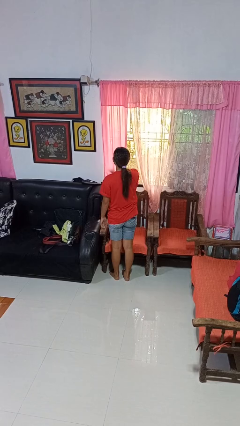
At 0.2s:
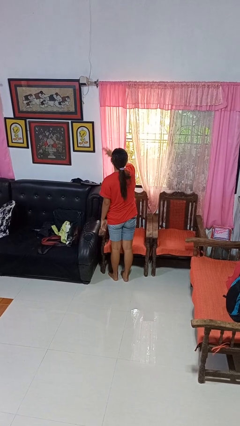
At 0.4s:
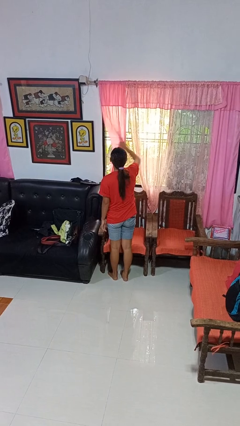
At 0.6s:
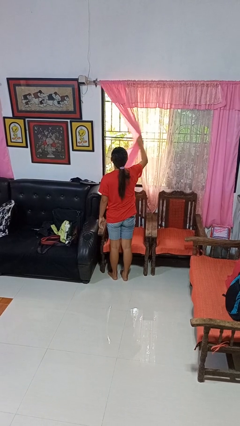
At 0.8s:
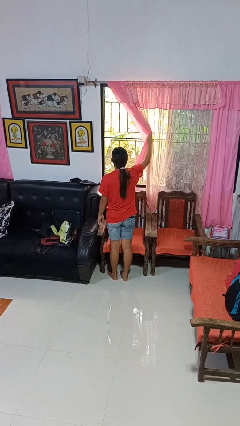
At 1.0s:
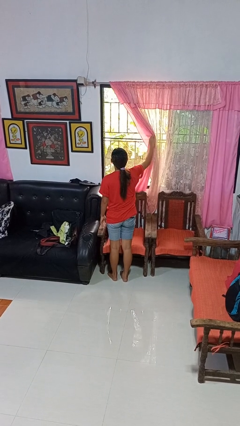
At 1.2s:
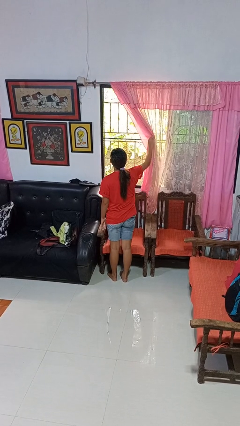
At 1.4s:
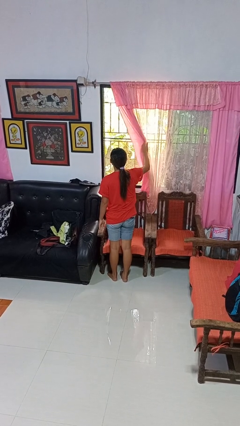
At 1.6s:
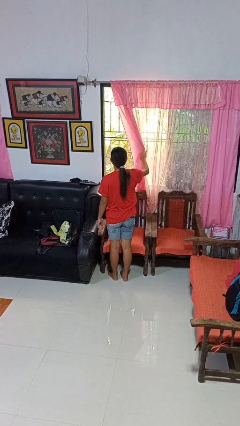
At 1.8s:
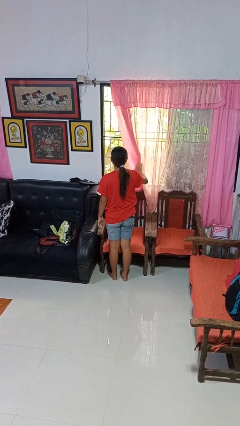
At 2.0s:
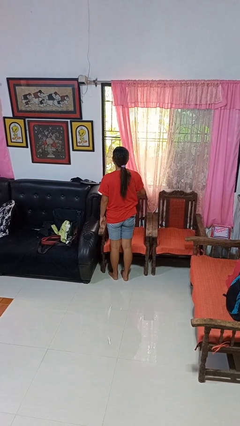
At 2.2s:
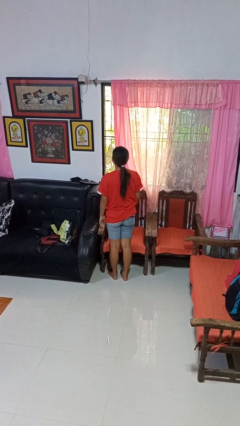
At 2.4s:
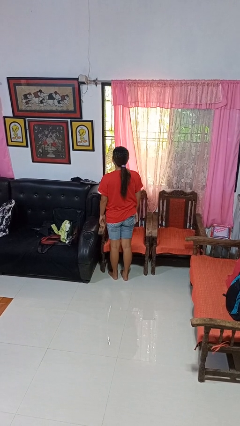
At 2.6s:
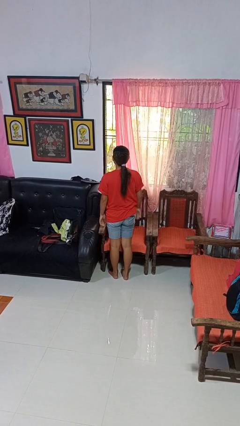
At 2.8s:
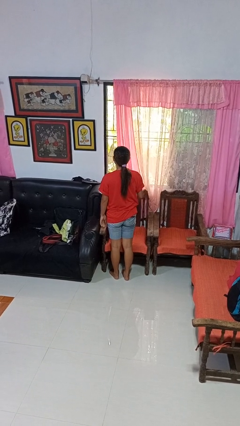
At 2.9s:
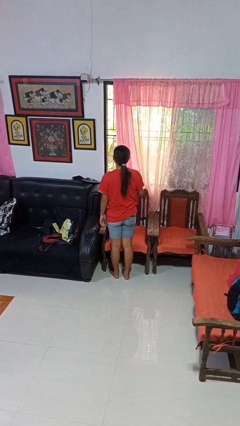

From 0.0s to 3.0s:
person opens curtains

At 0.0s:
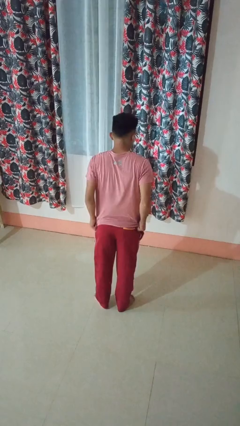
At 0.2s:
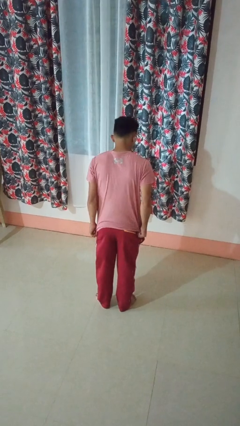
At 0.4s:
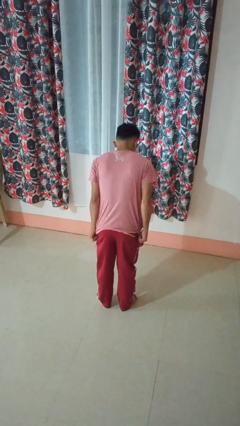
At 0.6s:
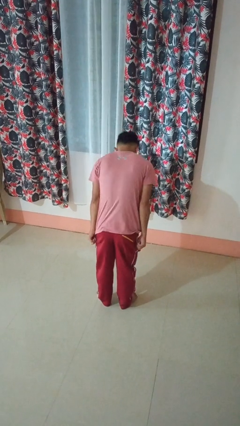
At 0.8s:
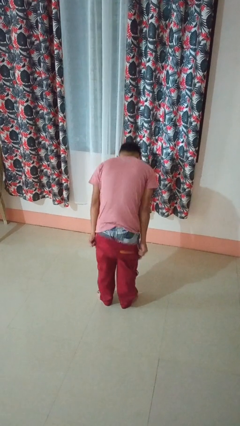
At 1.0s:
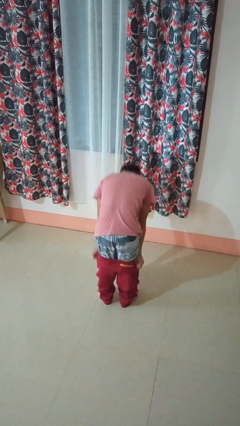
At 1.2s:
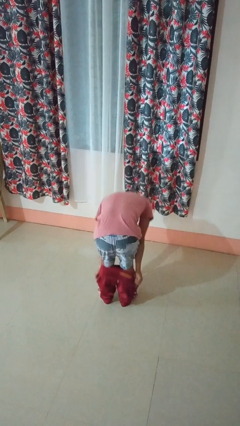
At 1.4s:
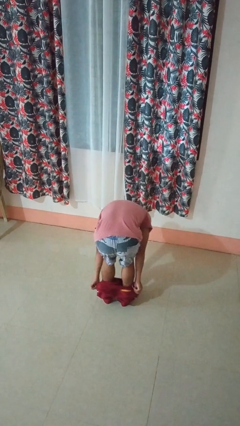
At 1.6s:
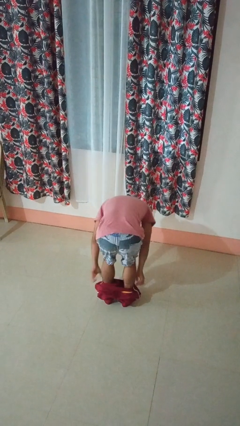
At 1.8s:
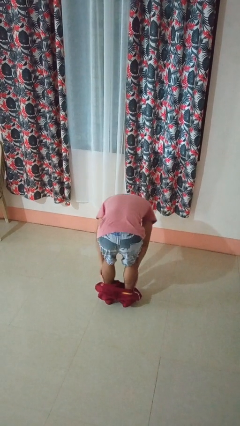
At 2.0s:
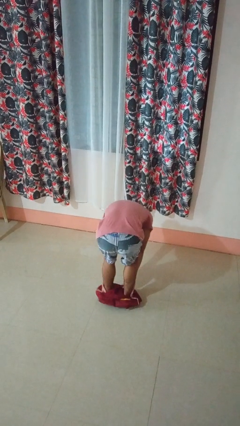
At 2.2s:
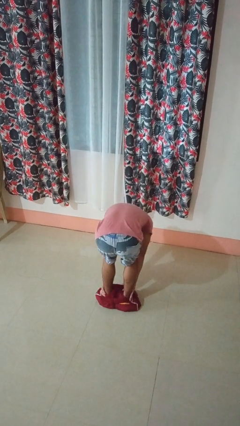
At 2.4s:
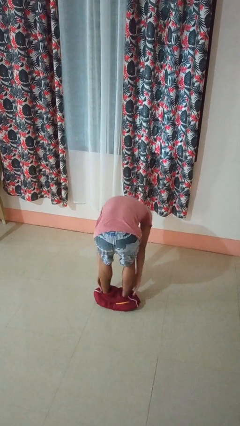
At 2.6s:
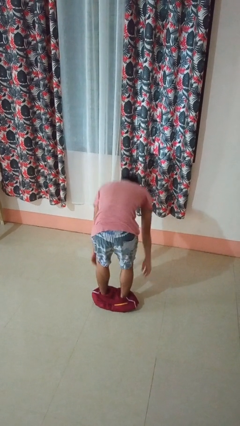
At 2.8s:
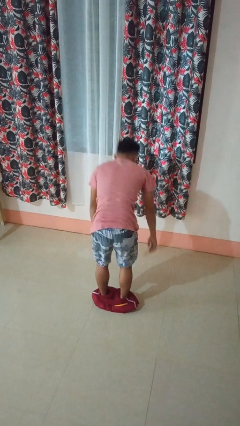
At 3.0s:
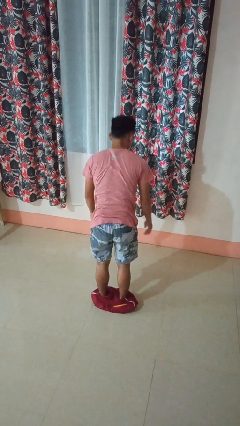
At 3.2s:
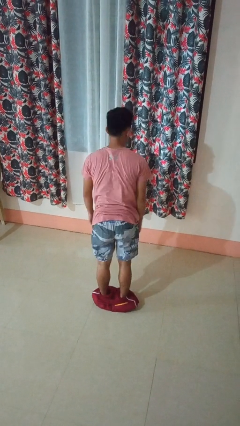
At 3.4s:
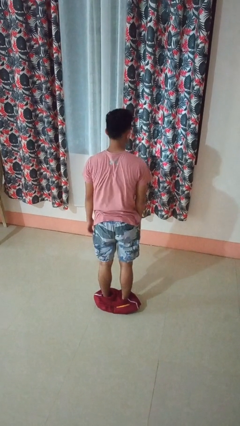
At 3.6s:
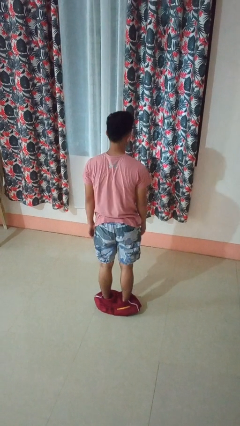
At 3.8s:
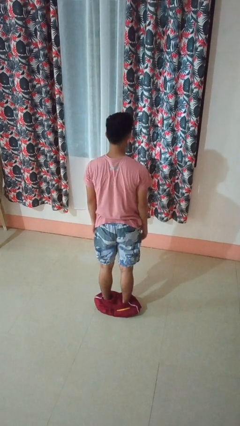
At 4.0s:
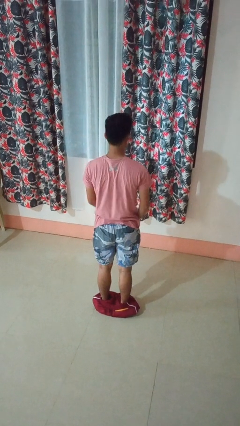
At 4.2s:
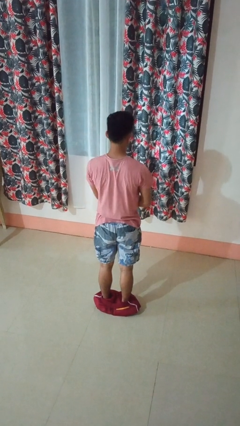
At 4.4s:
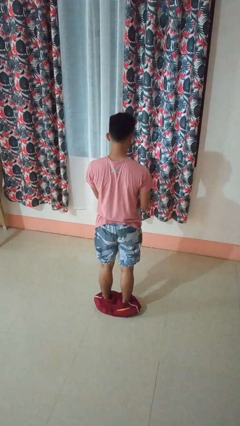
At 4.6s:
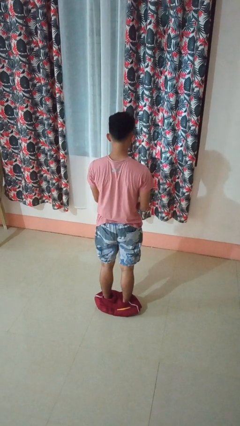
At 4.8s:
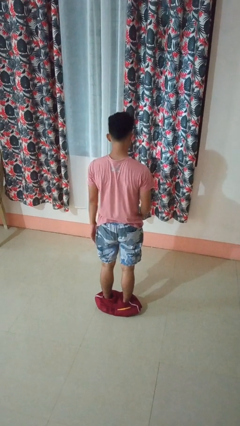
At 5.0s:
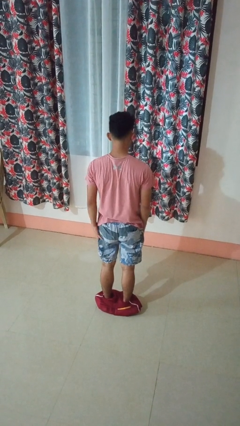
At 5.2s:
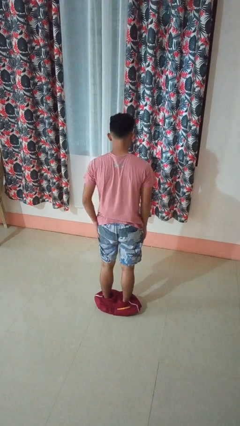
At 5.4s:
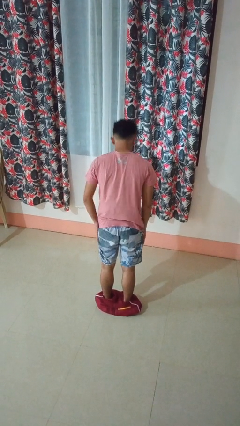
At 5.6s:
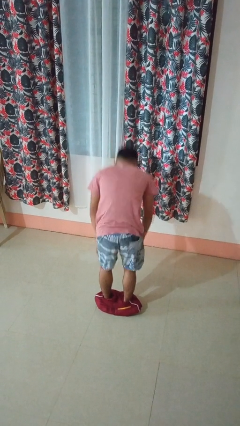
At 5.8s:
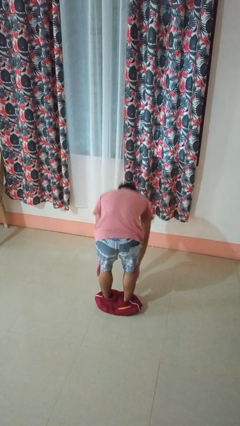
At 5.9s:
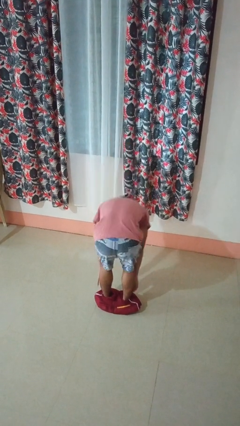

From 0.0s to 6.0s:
person takes off pants

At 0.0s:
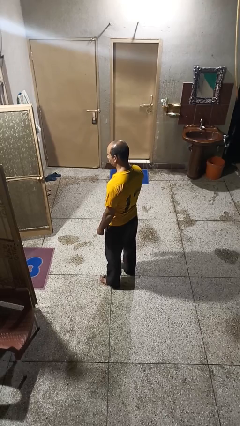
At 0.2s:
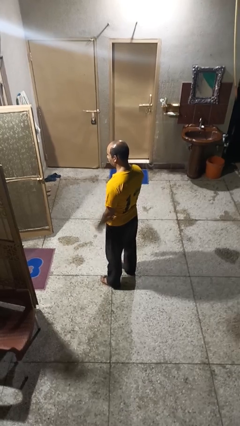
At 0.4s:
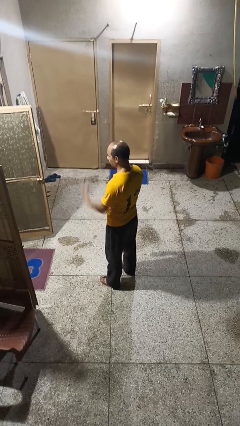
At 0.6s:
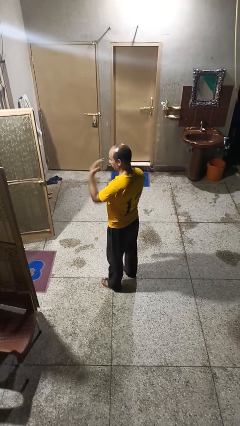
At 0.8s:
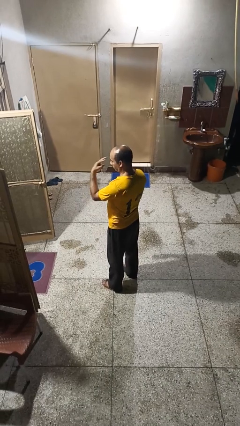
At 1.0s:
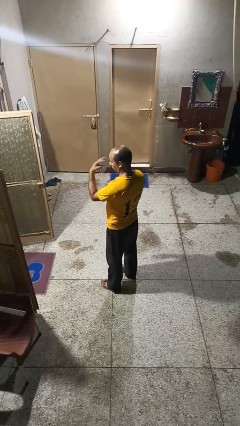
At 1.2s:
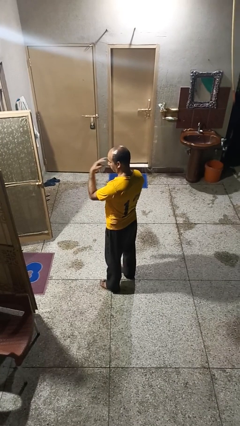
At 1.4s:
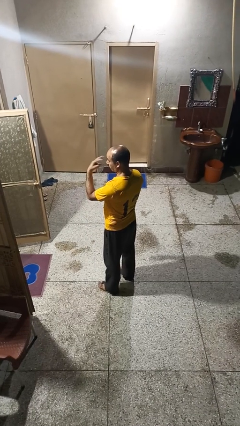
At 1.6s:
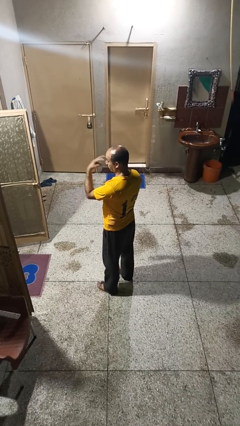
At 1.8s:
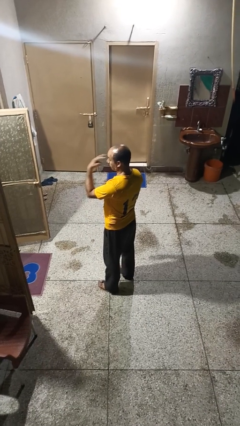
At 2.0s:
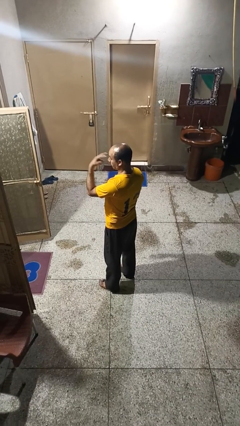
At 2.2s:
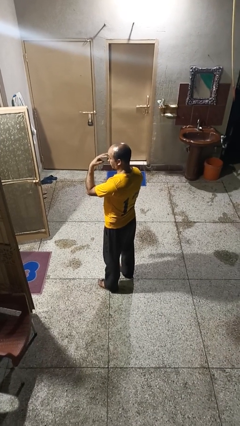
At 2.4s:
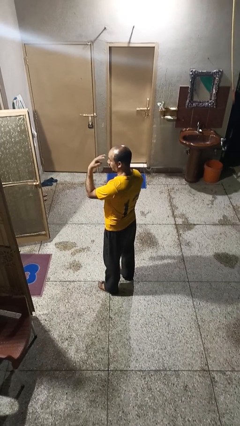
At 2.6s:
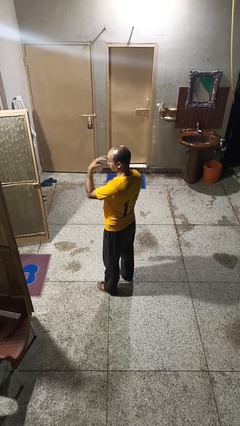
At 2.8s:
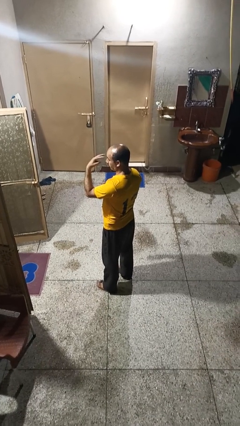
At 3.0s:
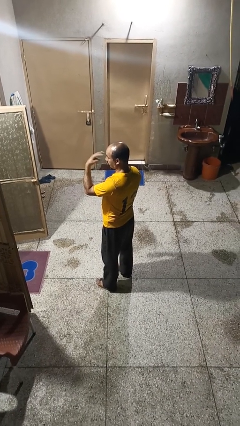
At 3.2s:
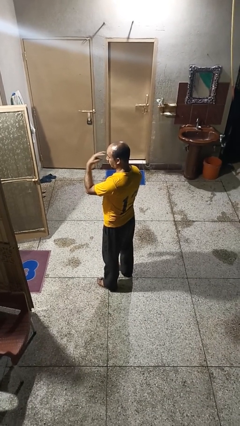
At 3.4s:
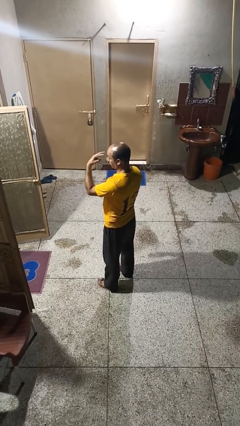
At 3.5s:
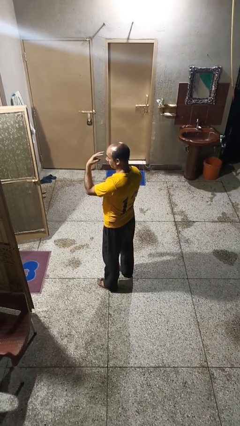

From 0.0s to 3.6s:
person gestures watch closely

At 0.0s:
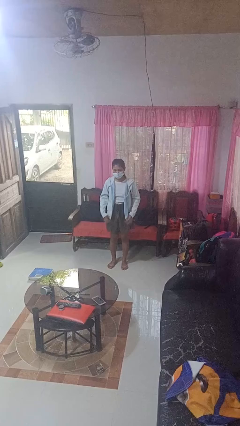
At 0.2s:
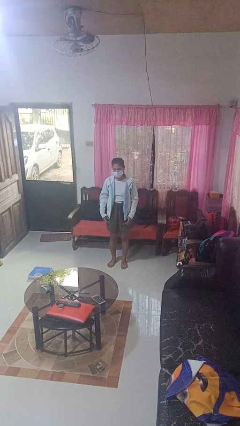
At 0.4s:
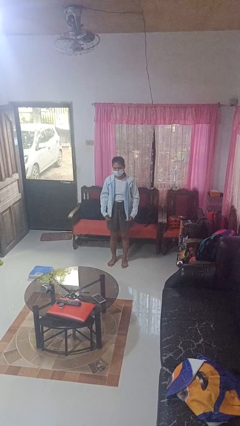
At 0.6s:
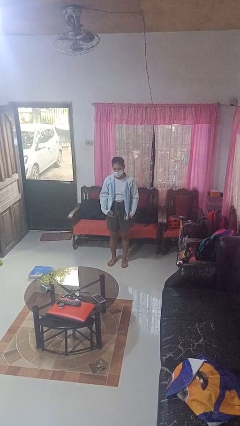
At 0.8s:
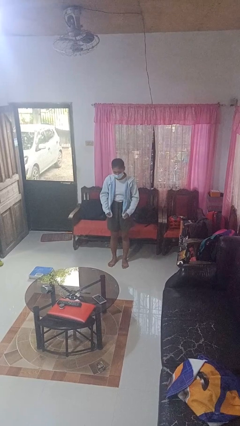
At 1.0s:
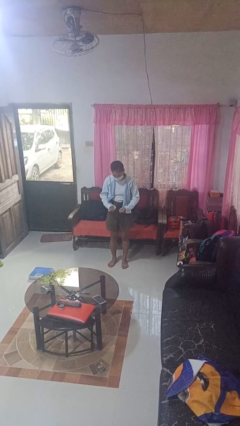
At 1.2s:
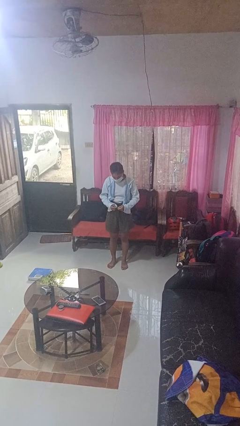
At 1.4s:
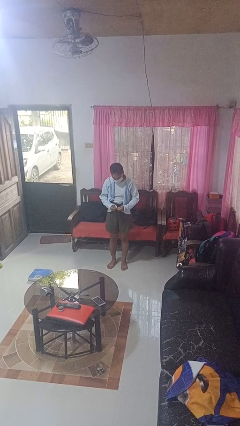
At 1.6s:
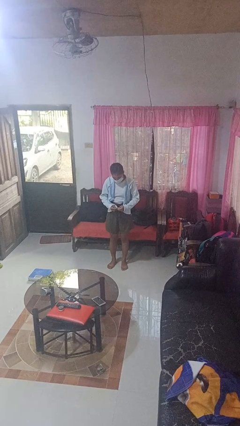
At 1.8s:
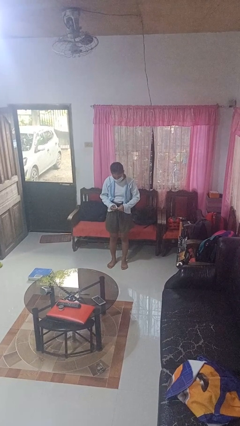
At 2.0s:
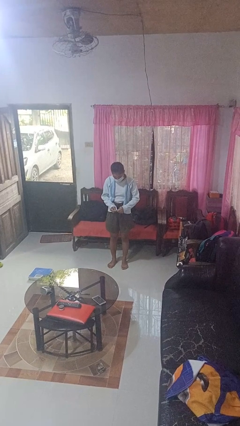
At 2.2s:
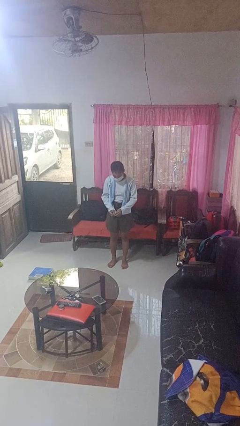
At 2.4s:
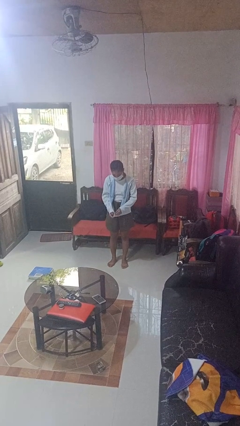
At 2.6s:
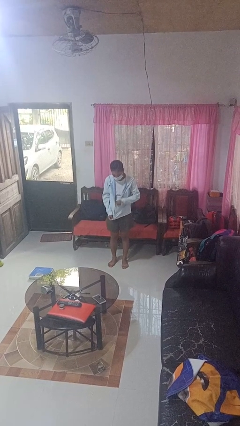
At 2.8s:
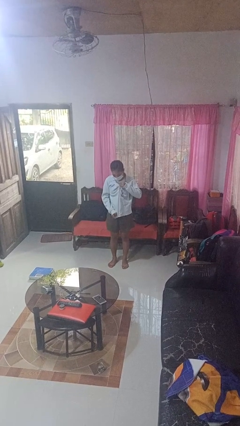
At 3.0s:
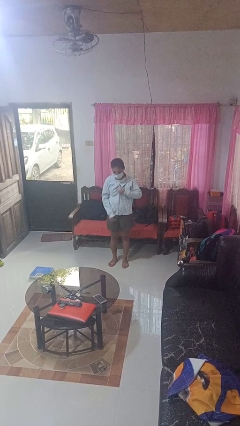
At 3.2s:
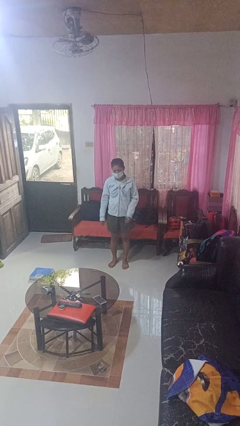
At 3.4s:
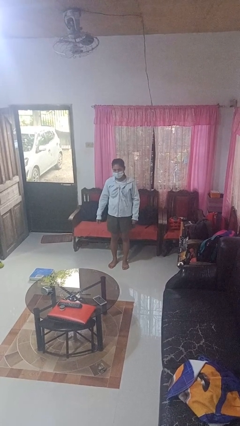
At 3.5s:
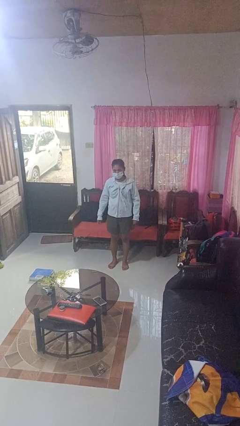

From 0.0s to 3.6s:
person zips up jacket

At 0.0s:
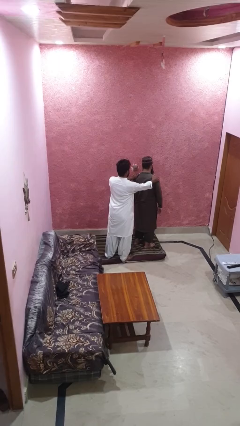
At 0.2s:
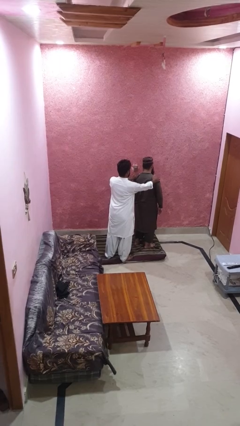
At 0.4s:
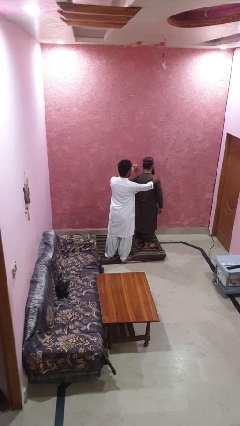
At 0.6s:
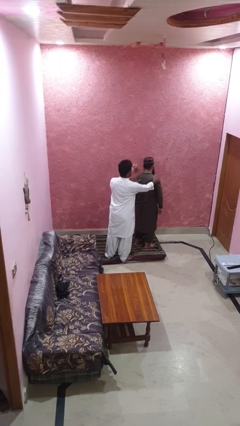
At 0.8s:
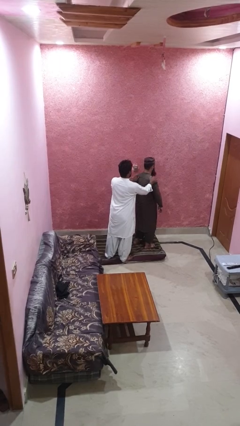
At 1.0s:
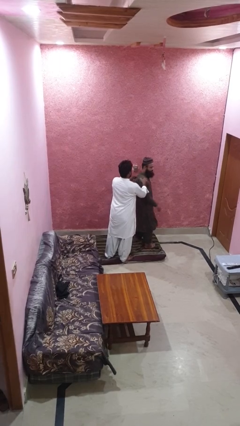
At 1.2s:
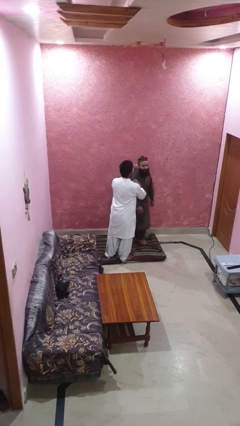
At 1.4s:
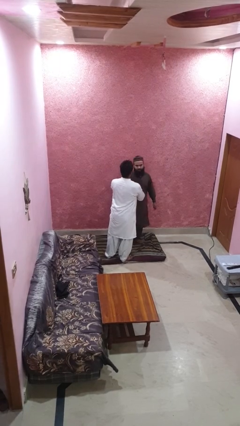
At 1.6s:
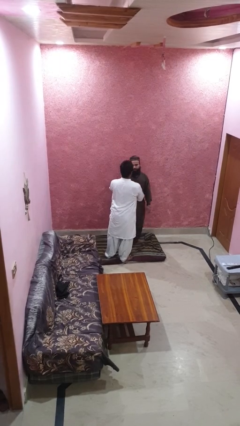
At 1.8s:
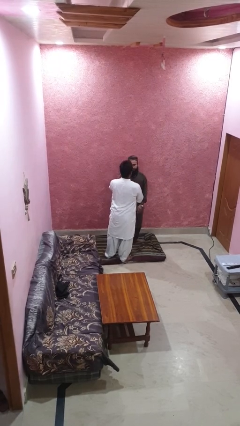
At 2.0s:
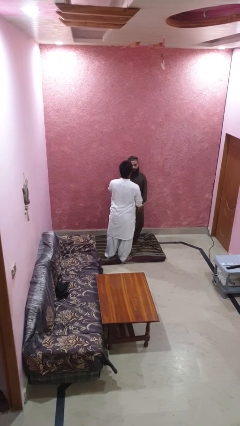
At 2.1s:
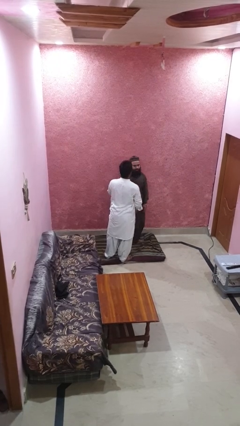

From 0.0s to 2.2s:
person spins person around
